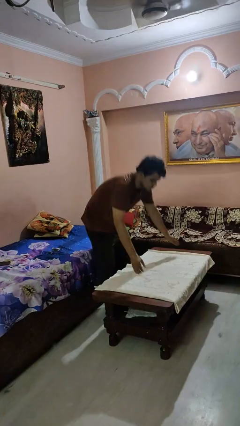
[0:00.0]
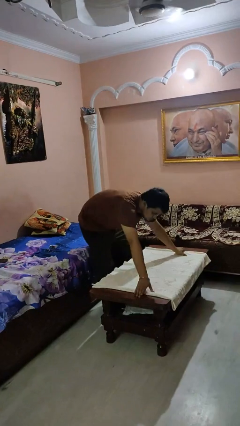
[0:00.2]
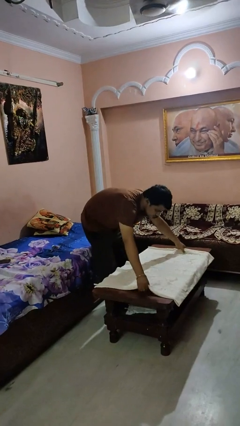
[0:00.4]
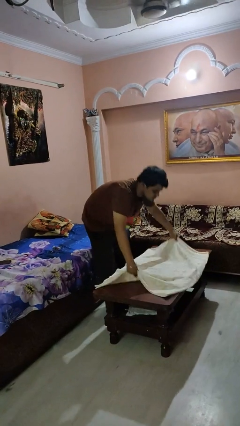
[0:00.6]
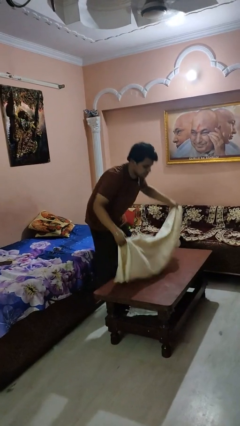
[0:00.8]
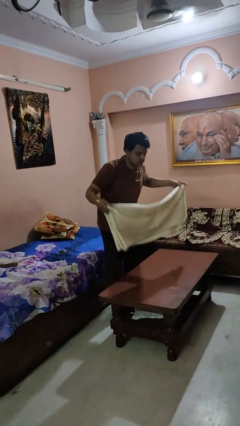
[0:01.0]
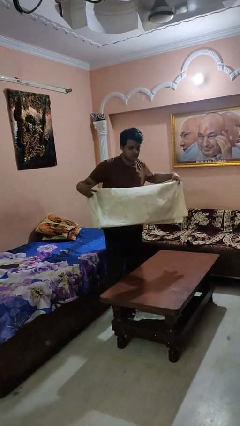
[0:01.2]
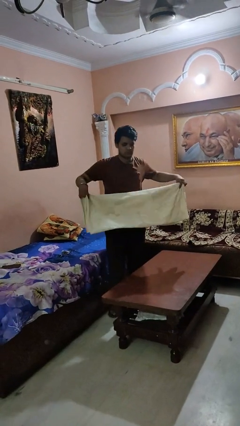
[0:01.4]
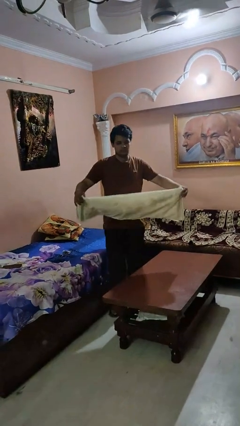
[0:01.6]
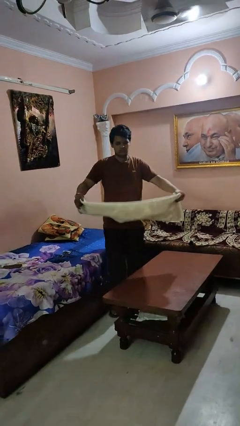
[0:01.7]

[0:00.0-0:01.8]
person folds tablecloth

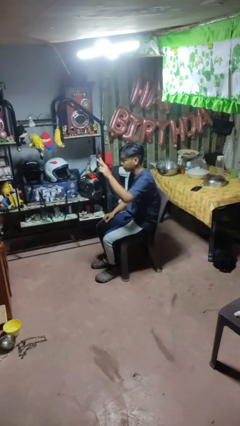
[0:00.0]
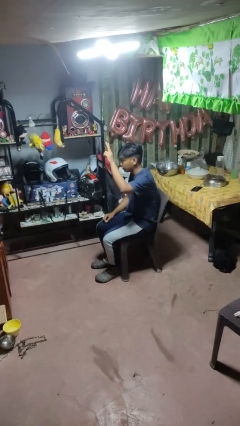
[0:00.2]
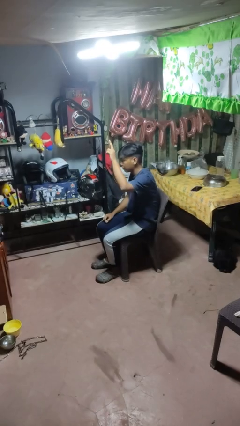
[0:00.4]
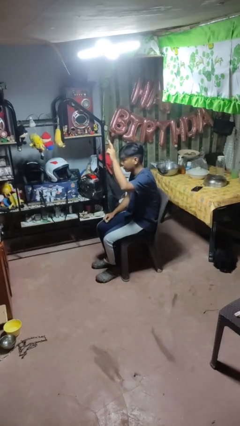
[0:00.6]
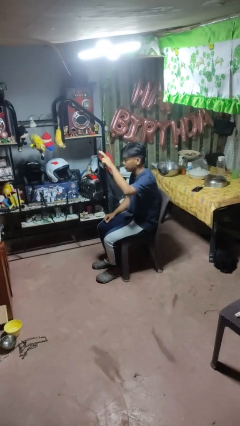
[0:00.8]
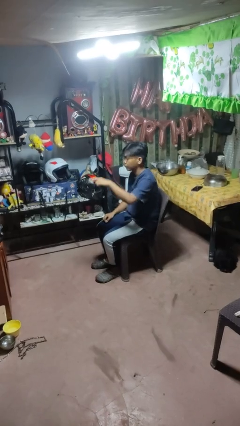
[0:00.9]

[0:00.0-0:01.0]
person gestures peace

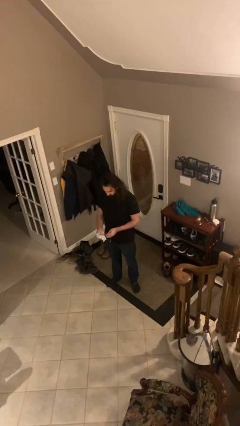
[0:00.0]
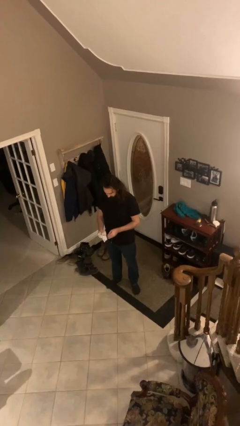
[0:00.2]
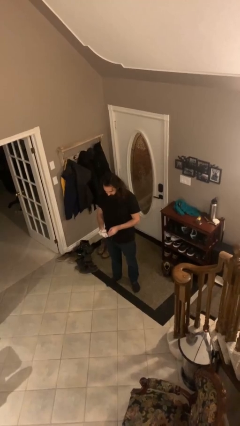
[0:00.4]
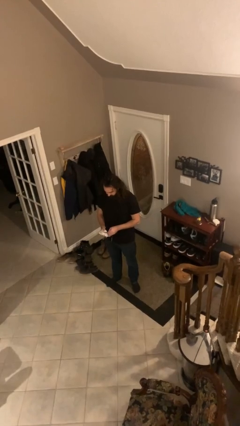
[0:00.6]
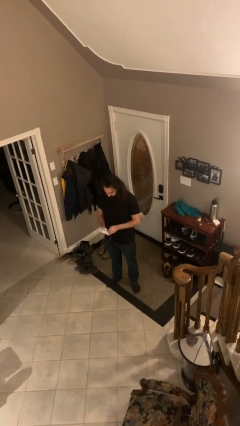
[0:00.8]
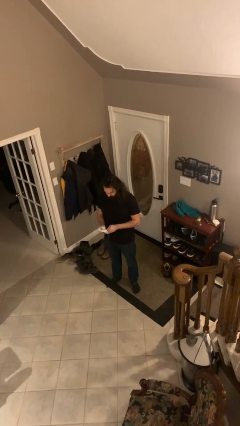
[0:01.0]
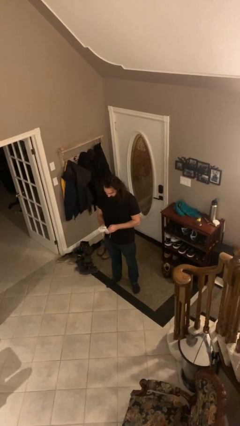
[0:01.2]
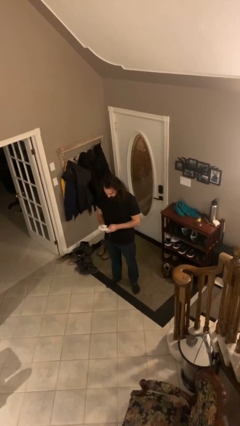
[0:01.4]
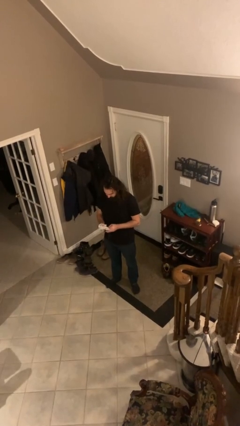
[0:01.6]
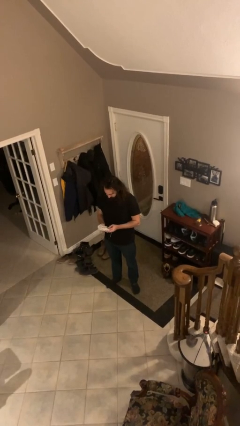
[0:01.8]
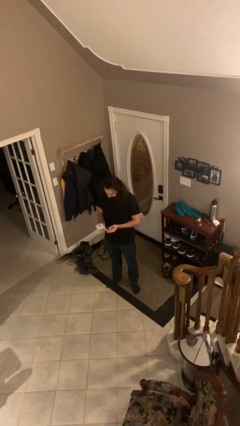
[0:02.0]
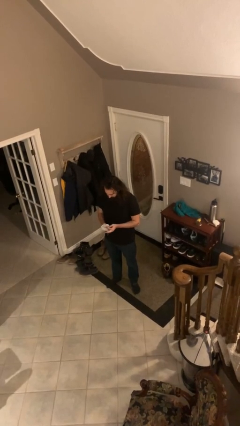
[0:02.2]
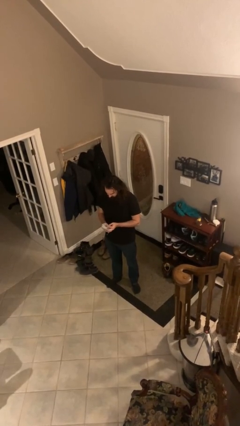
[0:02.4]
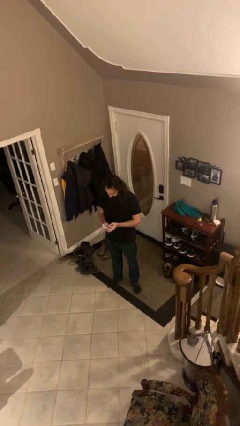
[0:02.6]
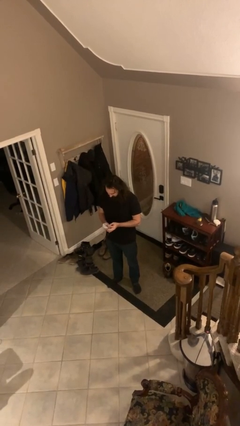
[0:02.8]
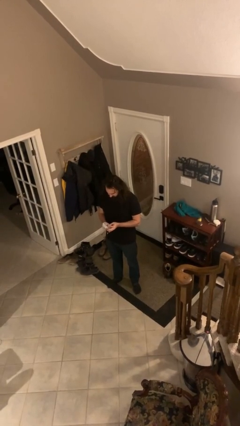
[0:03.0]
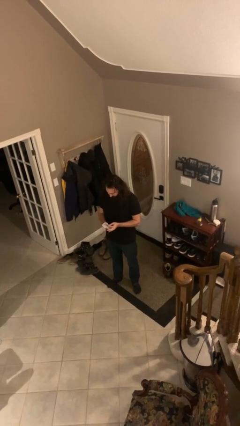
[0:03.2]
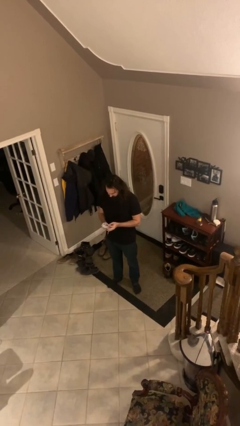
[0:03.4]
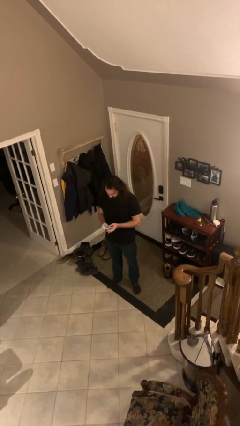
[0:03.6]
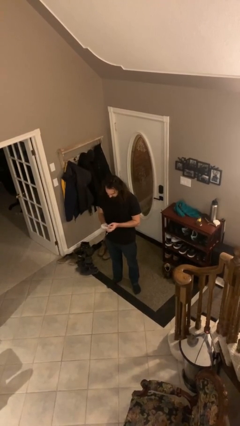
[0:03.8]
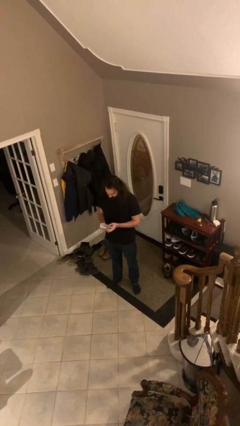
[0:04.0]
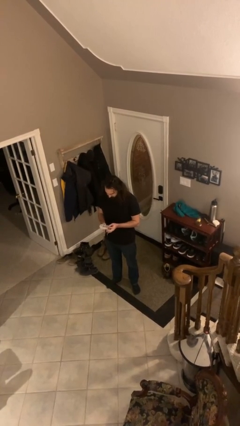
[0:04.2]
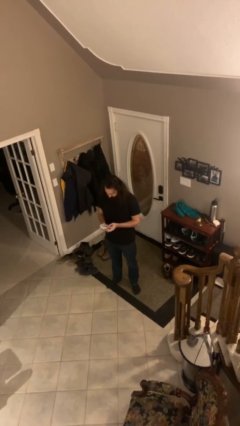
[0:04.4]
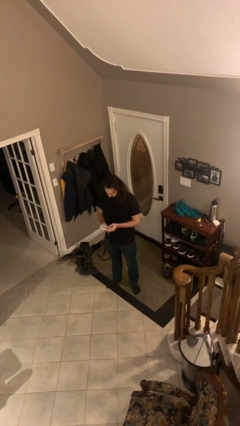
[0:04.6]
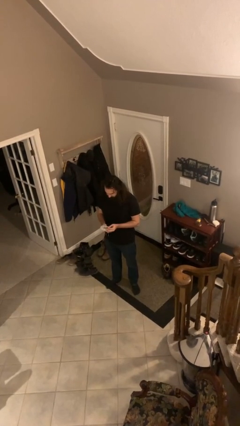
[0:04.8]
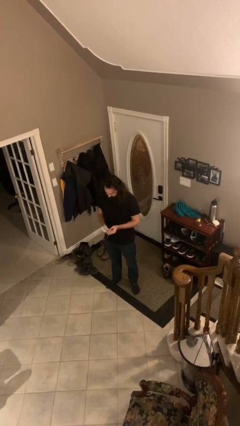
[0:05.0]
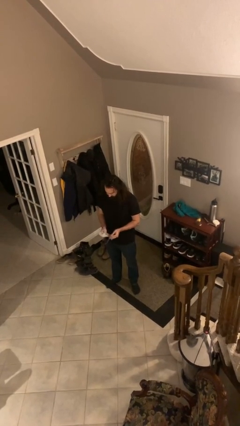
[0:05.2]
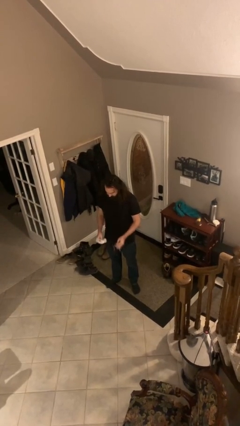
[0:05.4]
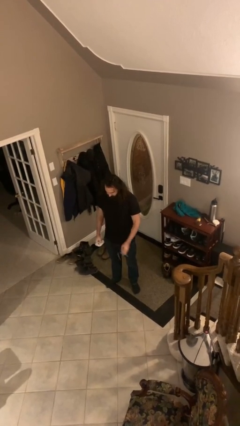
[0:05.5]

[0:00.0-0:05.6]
person cleans eyeglasses

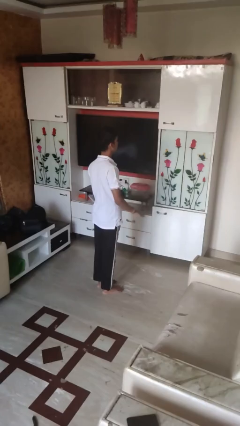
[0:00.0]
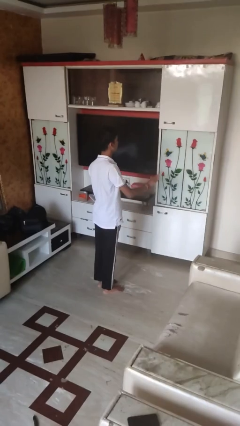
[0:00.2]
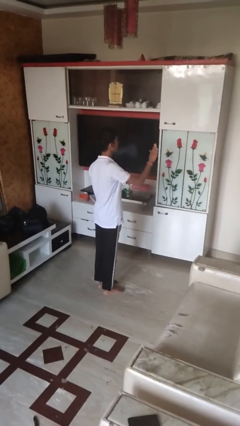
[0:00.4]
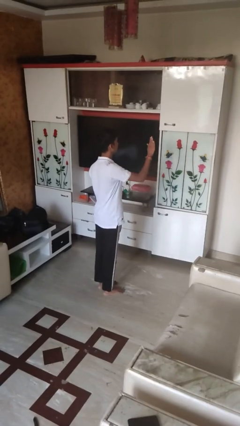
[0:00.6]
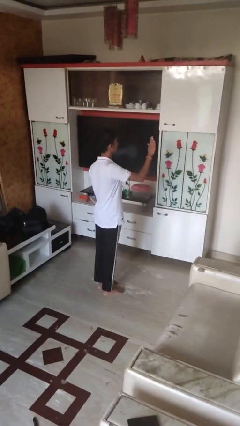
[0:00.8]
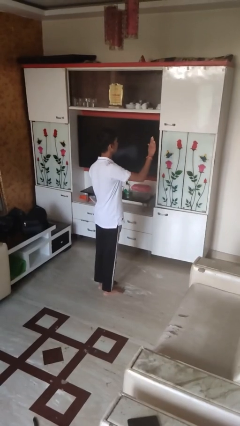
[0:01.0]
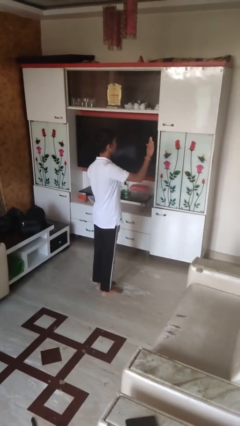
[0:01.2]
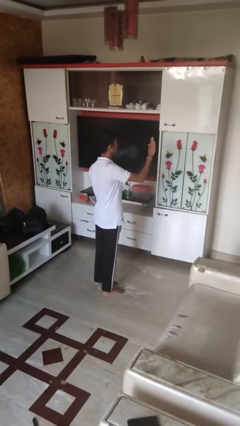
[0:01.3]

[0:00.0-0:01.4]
person gestures swipe up

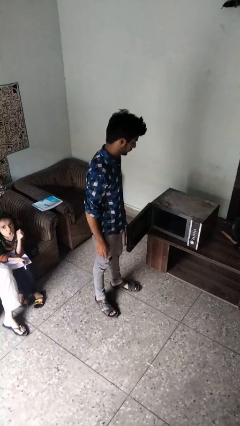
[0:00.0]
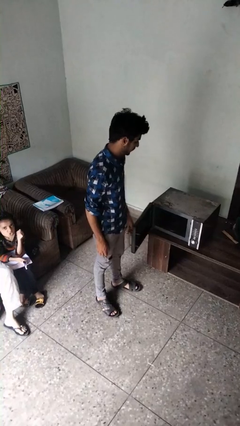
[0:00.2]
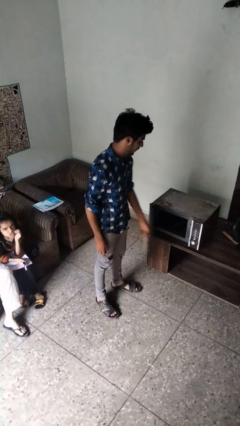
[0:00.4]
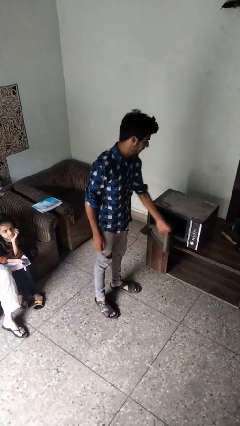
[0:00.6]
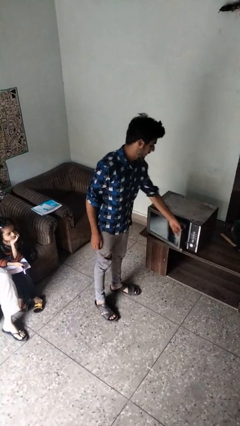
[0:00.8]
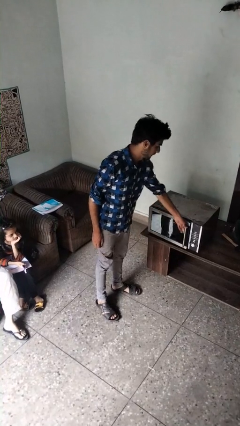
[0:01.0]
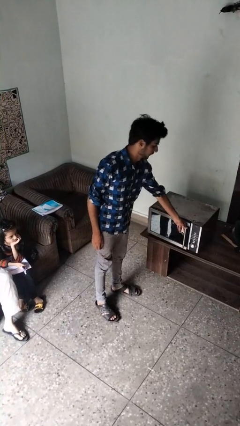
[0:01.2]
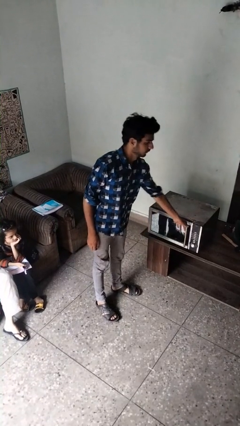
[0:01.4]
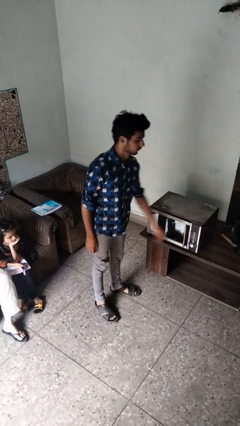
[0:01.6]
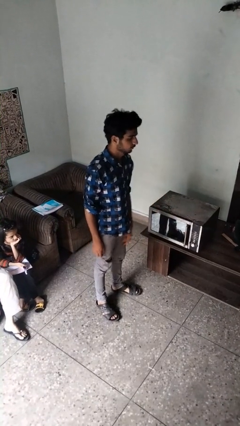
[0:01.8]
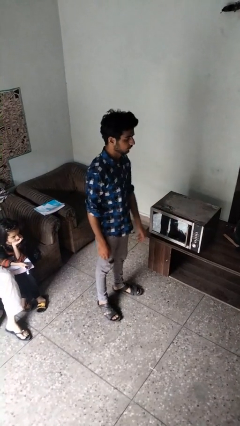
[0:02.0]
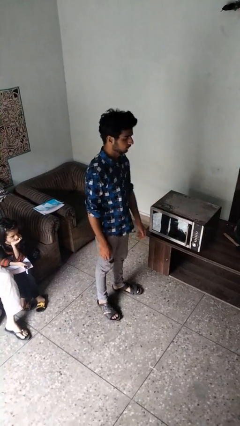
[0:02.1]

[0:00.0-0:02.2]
person closes microwave

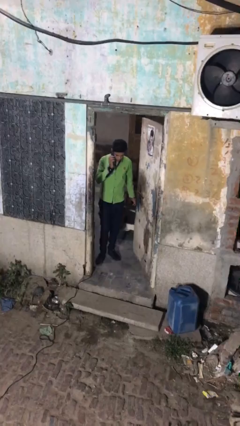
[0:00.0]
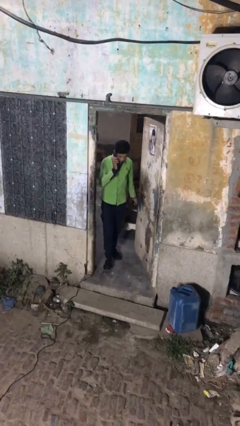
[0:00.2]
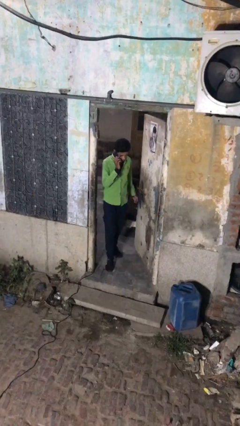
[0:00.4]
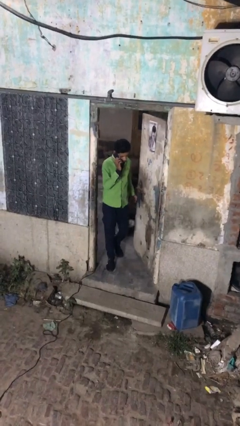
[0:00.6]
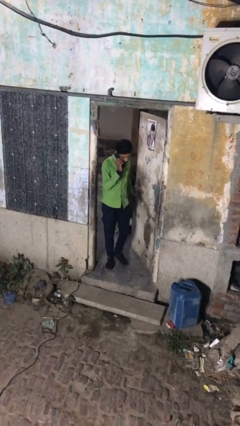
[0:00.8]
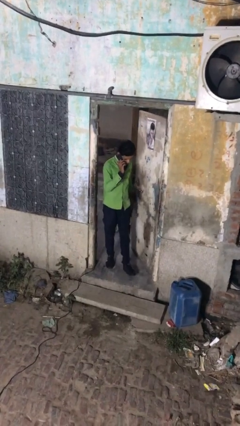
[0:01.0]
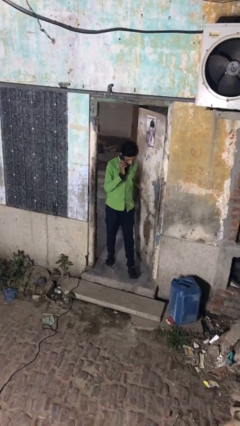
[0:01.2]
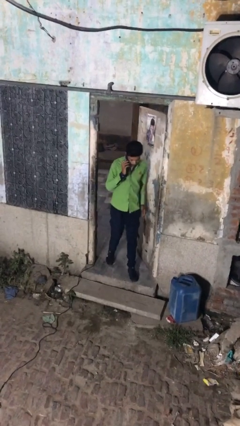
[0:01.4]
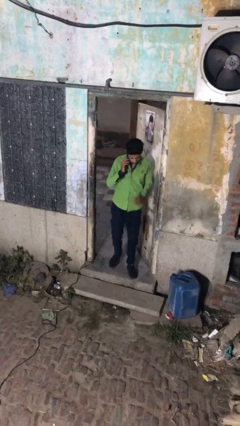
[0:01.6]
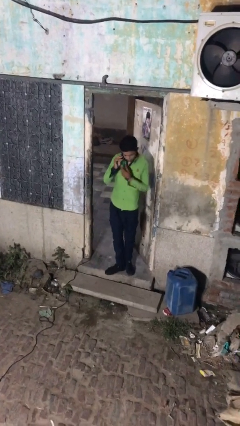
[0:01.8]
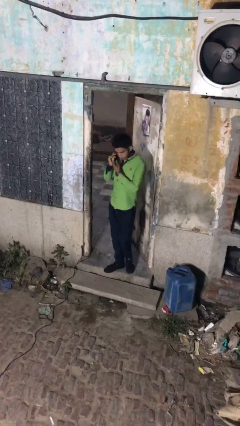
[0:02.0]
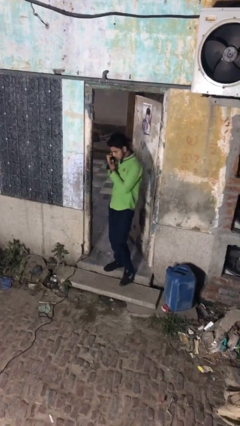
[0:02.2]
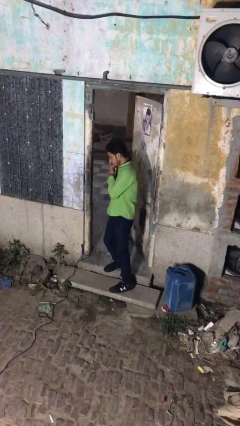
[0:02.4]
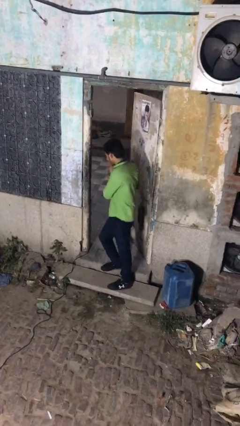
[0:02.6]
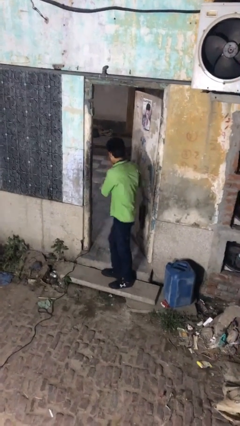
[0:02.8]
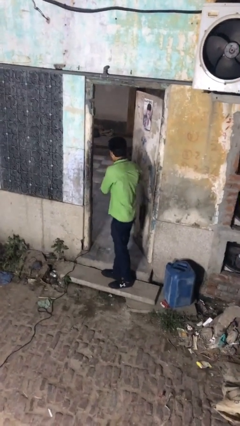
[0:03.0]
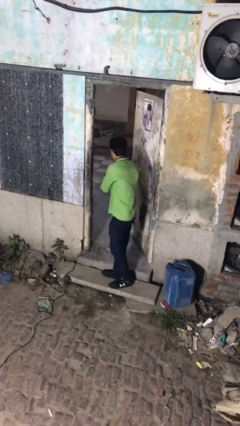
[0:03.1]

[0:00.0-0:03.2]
person enters scene through structure

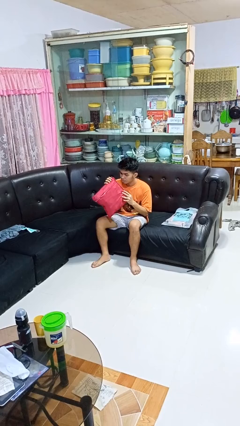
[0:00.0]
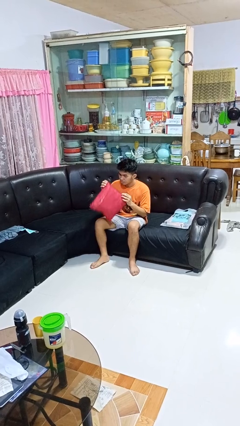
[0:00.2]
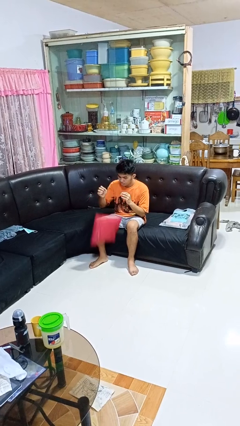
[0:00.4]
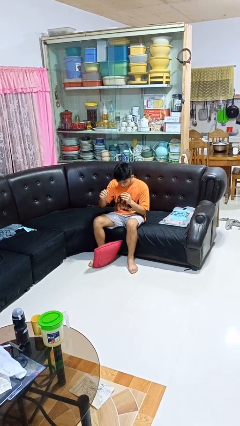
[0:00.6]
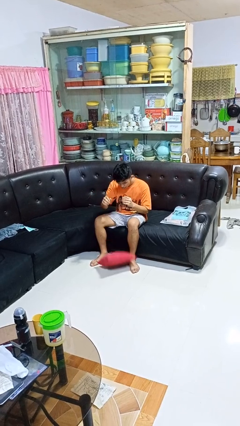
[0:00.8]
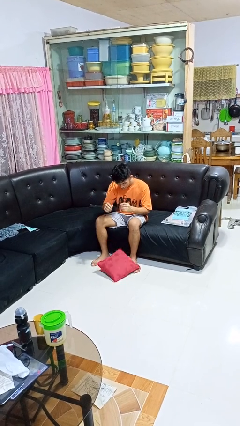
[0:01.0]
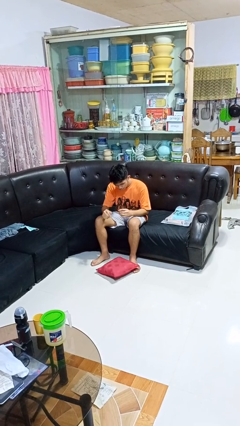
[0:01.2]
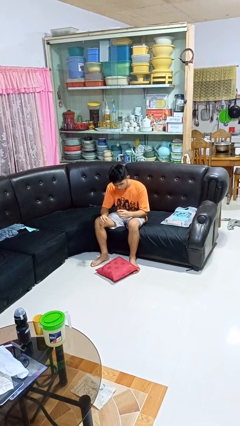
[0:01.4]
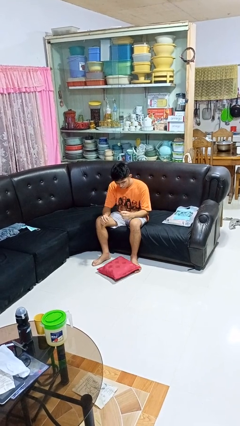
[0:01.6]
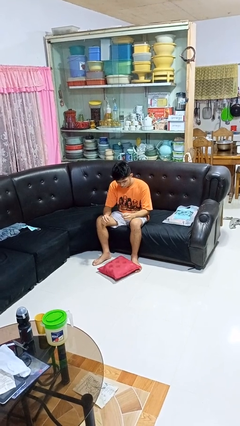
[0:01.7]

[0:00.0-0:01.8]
person drops object
